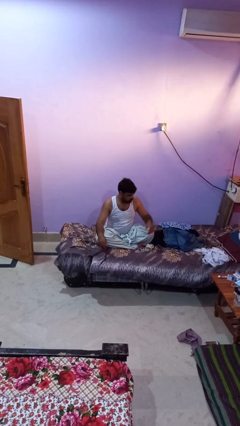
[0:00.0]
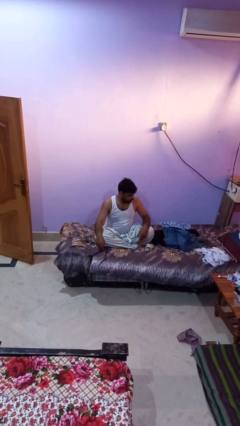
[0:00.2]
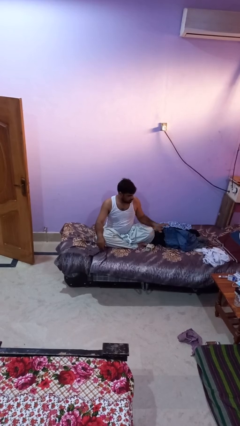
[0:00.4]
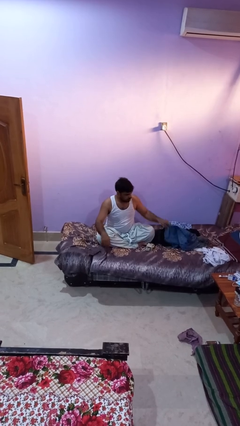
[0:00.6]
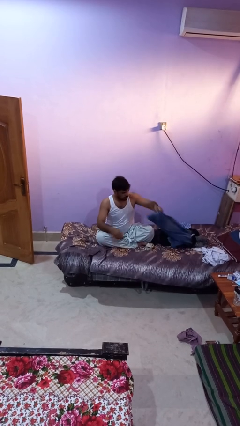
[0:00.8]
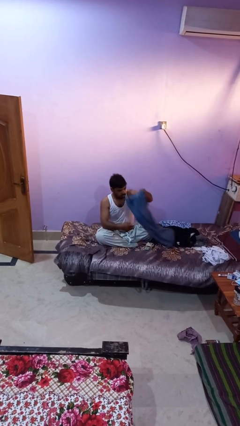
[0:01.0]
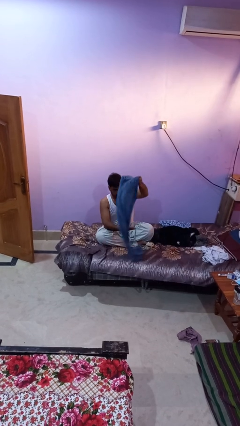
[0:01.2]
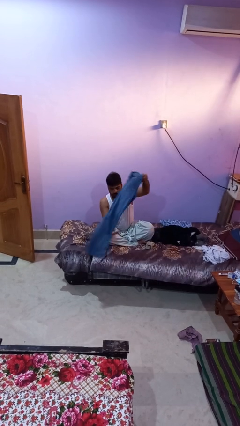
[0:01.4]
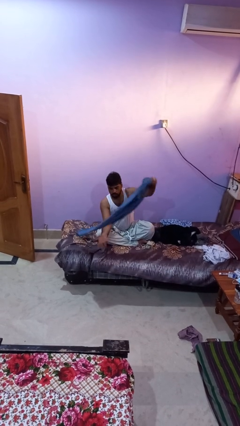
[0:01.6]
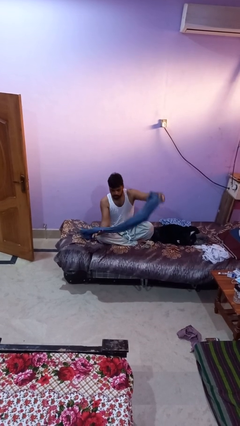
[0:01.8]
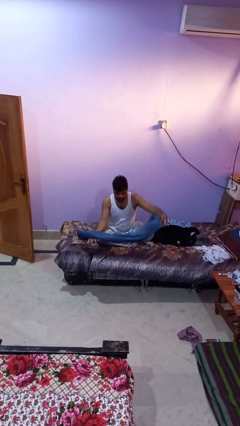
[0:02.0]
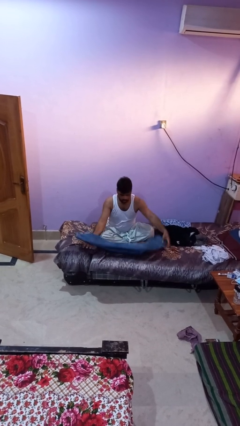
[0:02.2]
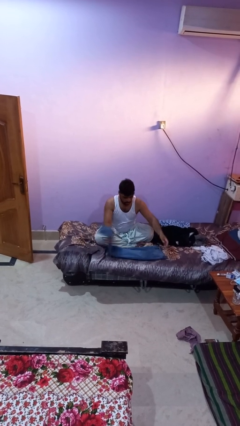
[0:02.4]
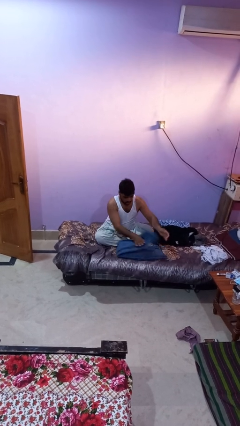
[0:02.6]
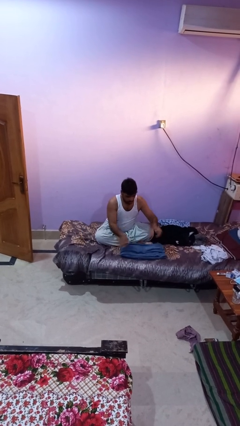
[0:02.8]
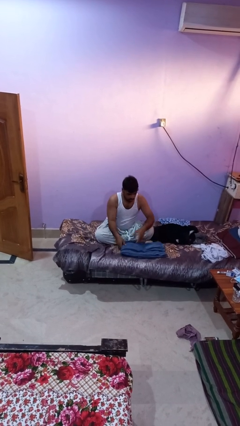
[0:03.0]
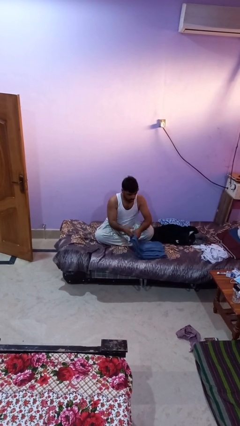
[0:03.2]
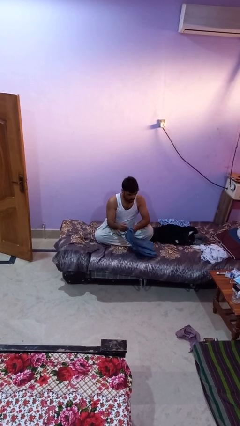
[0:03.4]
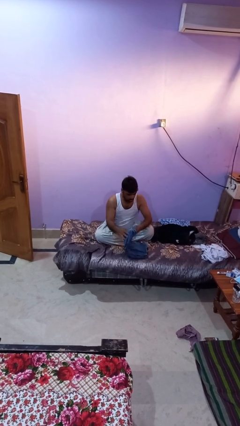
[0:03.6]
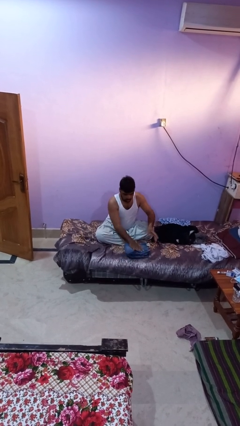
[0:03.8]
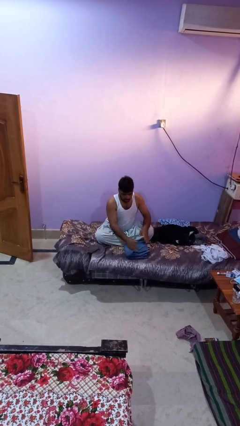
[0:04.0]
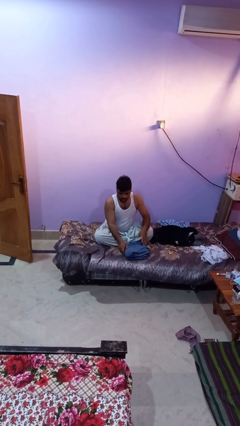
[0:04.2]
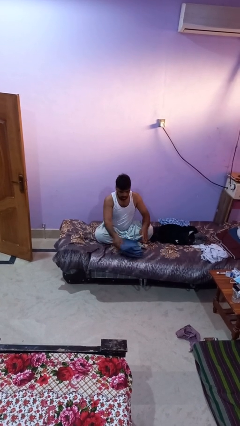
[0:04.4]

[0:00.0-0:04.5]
person folds pants

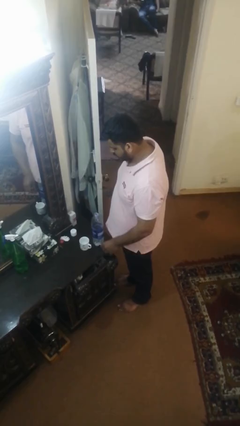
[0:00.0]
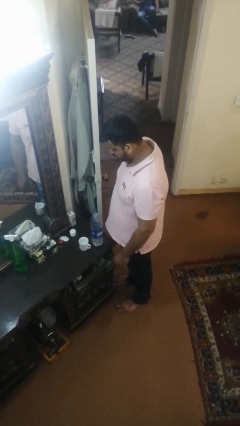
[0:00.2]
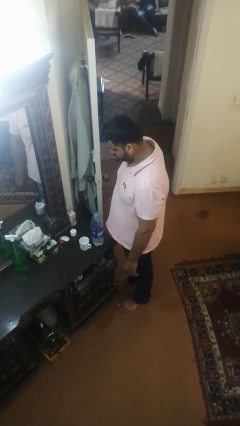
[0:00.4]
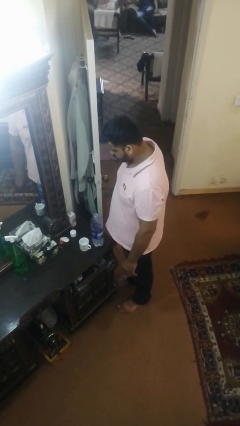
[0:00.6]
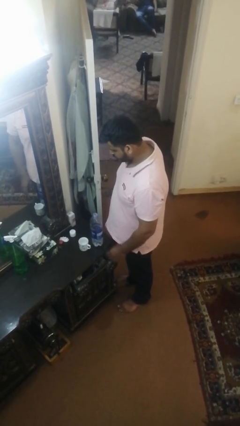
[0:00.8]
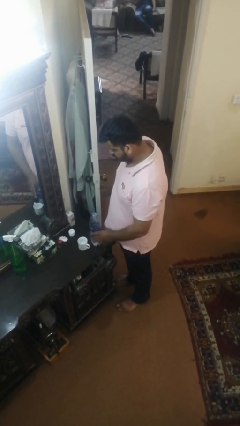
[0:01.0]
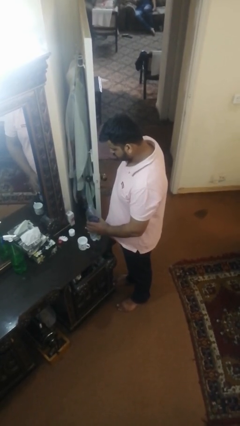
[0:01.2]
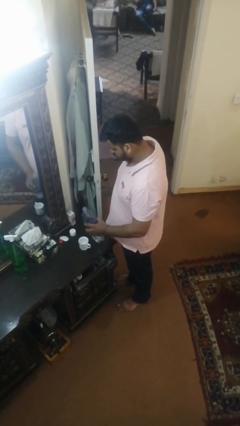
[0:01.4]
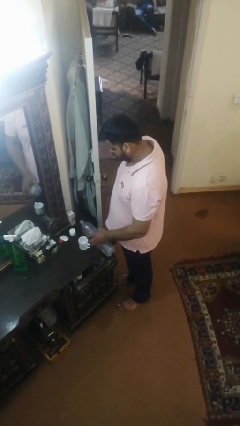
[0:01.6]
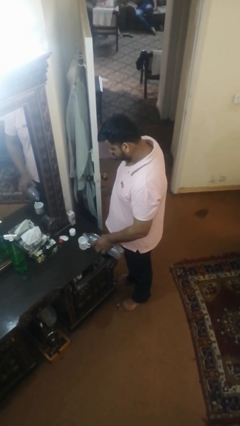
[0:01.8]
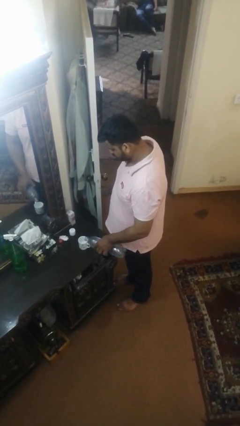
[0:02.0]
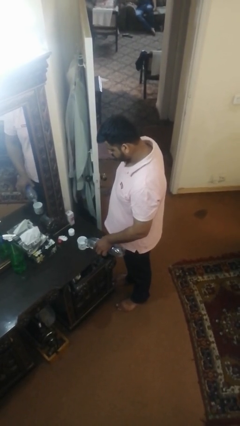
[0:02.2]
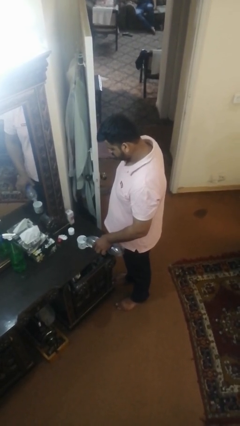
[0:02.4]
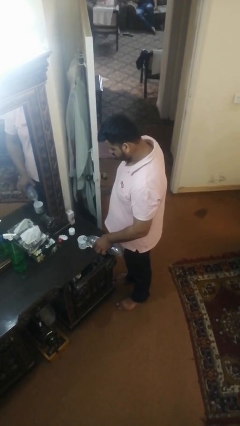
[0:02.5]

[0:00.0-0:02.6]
person pours liquid into cup

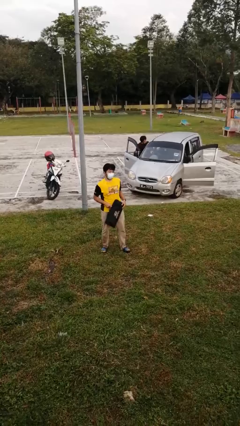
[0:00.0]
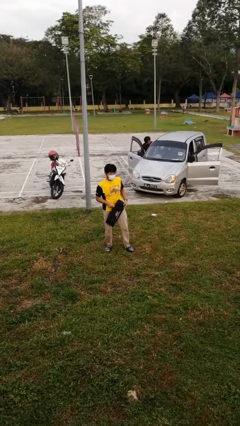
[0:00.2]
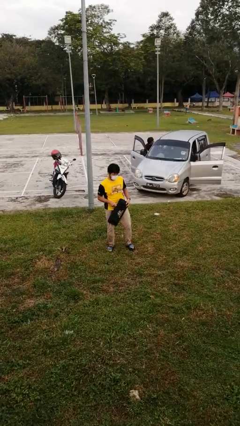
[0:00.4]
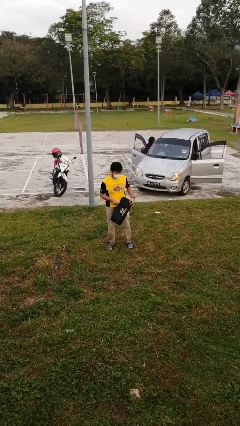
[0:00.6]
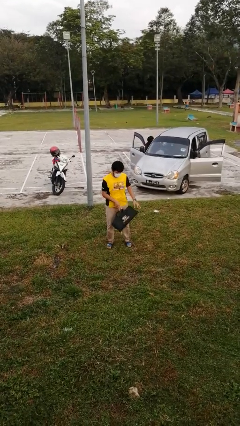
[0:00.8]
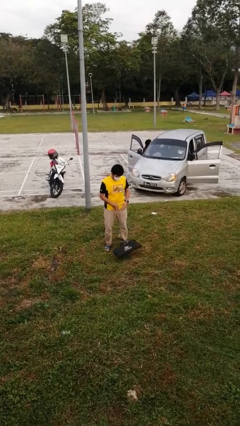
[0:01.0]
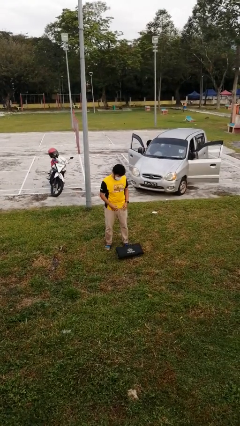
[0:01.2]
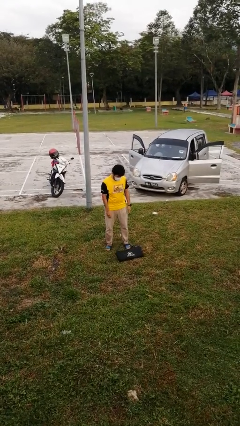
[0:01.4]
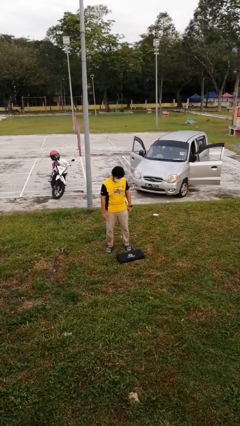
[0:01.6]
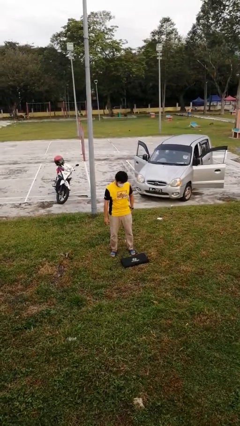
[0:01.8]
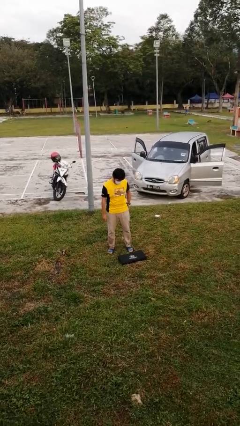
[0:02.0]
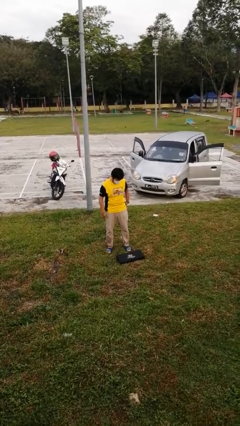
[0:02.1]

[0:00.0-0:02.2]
person drops object

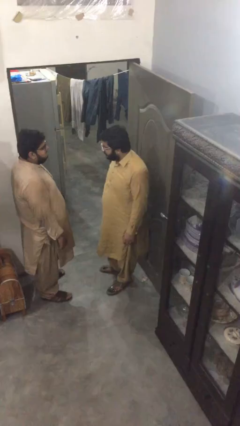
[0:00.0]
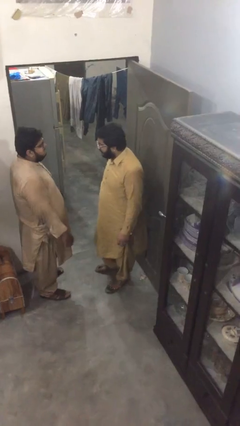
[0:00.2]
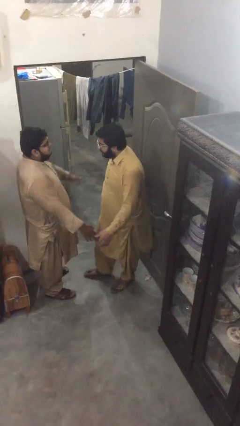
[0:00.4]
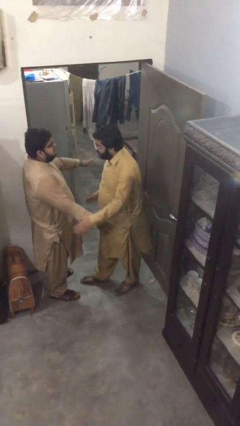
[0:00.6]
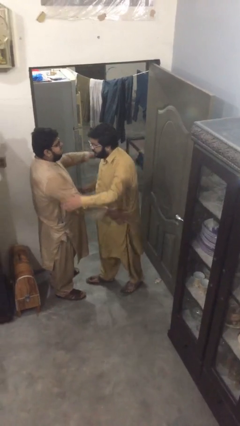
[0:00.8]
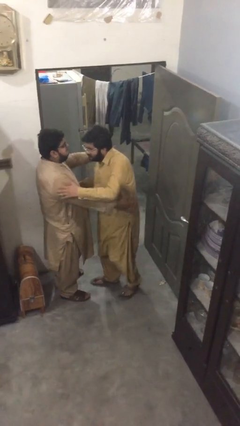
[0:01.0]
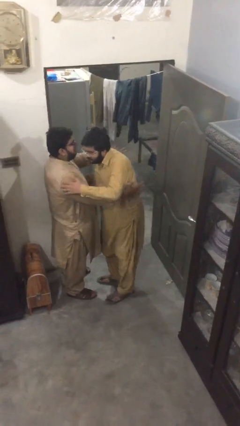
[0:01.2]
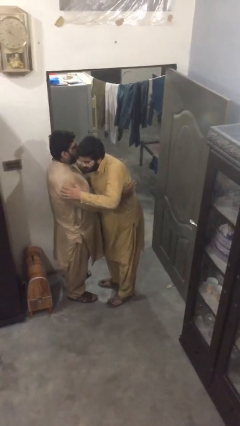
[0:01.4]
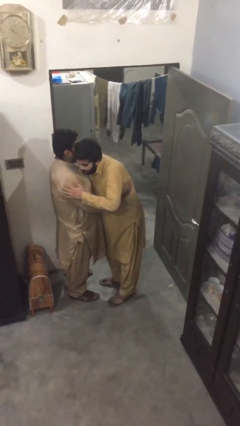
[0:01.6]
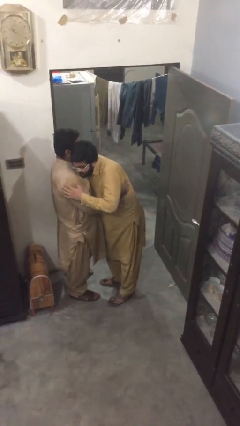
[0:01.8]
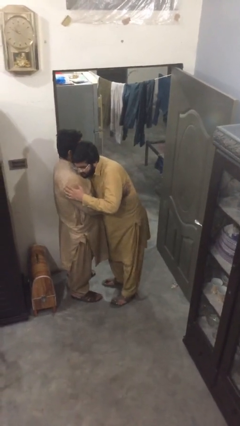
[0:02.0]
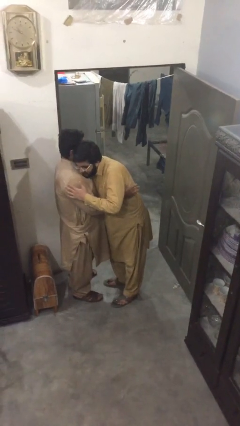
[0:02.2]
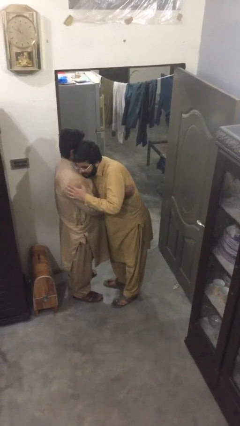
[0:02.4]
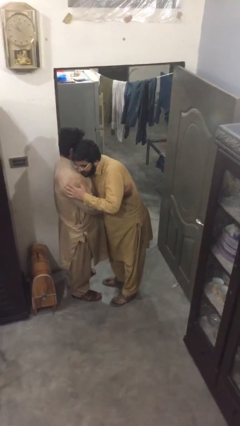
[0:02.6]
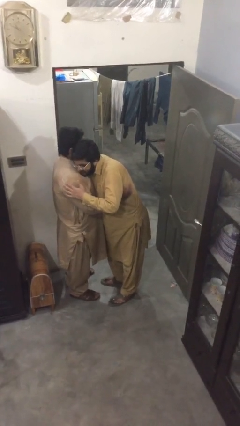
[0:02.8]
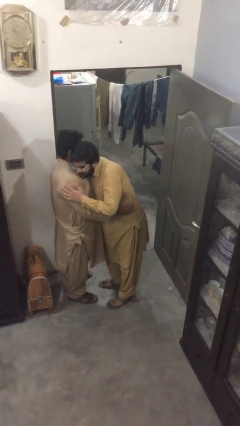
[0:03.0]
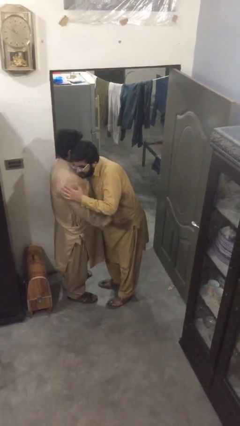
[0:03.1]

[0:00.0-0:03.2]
person embraces person

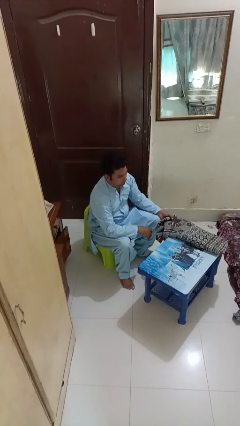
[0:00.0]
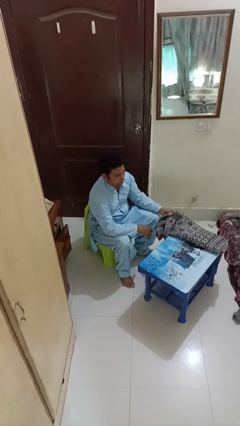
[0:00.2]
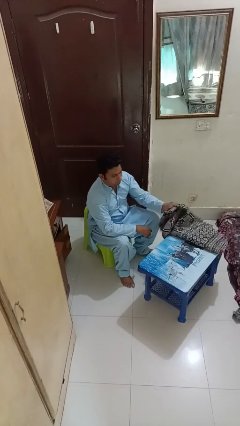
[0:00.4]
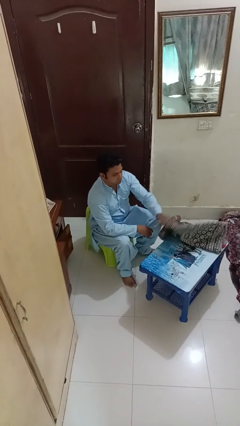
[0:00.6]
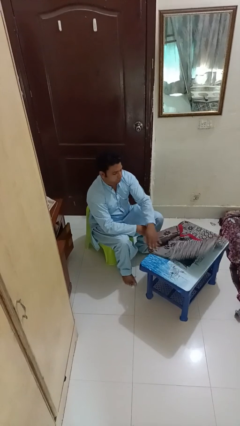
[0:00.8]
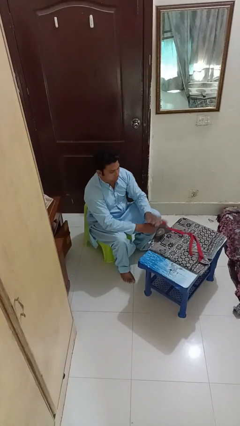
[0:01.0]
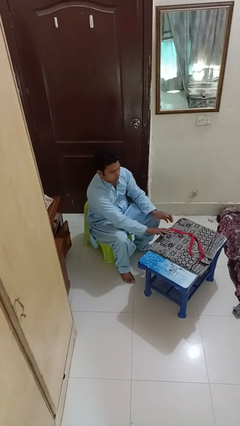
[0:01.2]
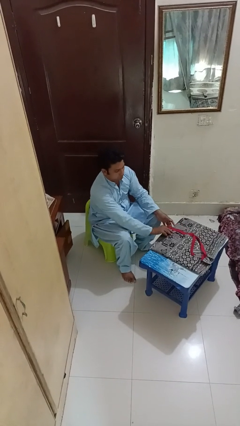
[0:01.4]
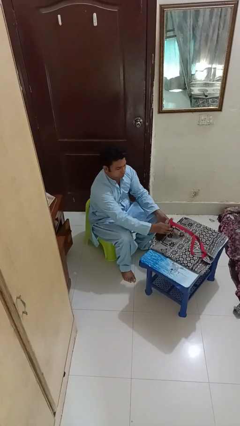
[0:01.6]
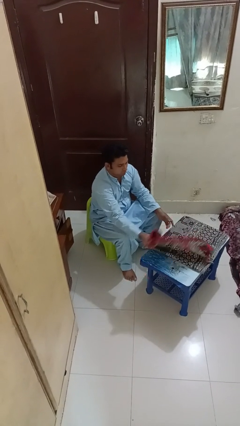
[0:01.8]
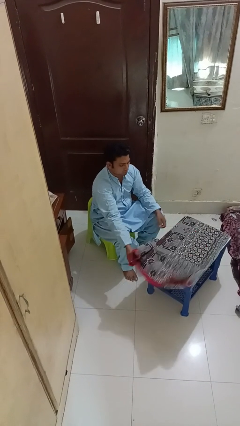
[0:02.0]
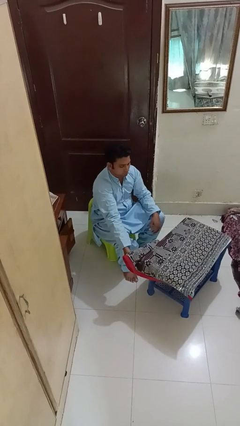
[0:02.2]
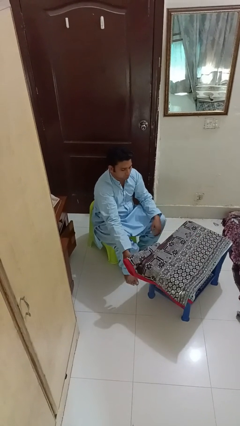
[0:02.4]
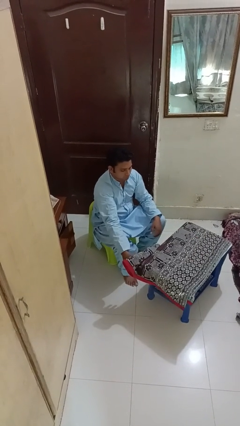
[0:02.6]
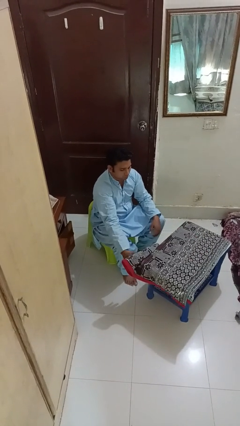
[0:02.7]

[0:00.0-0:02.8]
person unfolds blanket

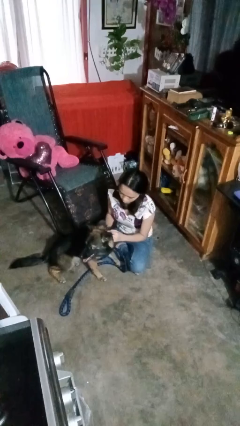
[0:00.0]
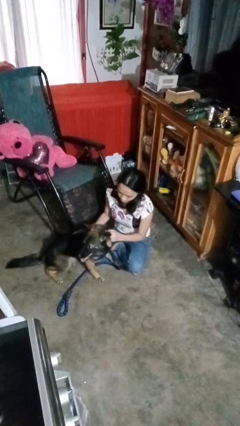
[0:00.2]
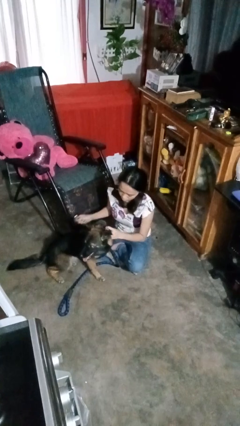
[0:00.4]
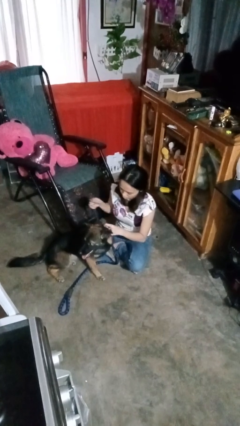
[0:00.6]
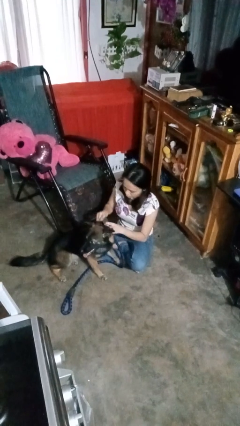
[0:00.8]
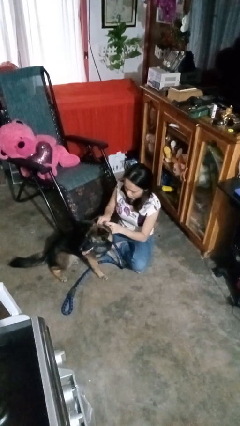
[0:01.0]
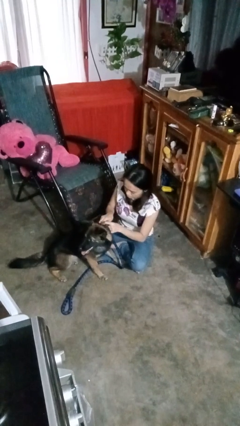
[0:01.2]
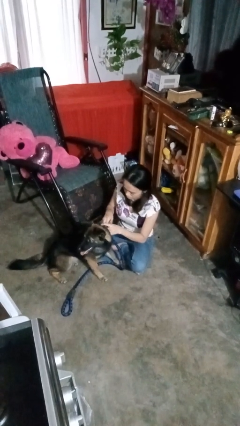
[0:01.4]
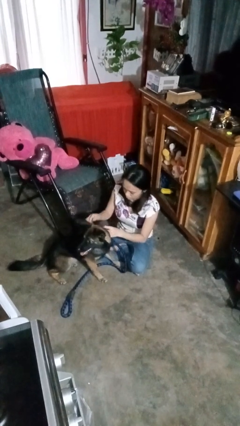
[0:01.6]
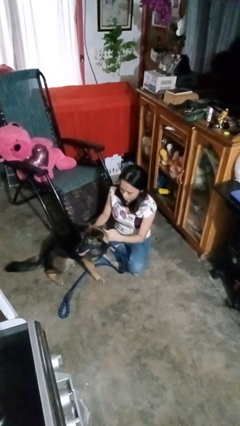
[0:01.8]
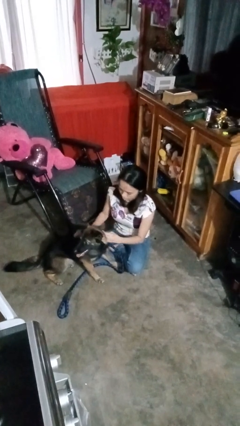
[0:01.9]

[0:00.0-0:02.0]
person attaches leash to dog

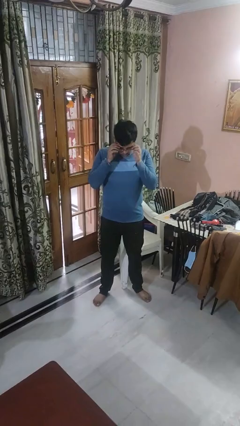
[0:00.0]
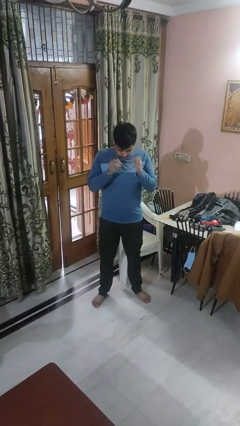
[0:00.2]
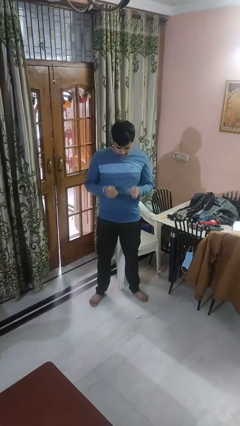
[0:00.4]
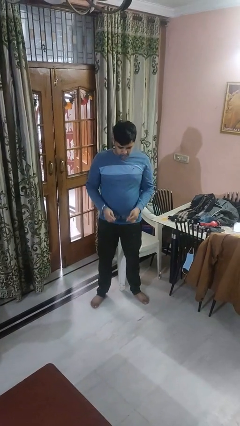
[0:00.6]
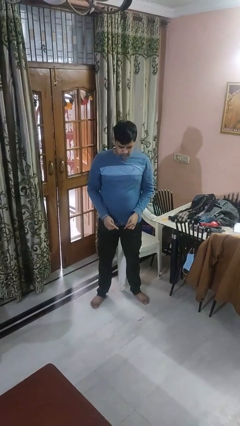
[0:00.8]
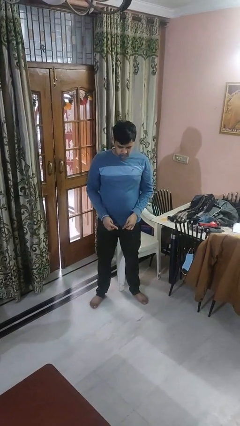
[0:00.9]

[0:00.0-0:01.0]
person takes off glasses
